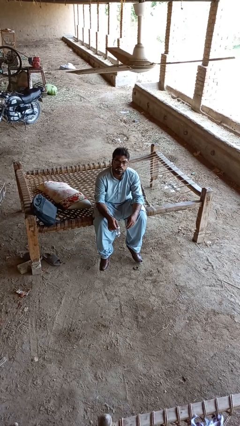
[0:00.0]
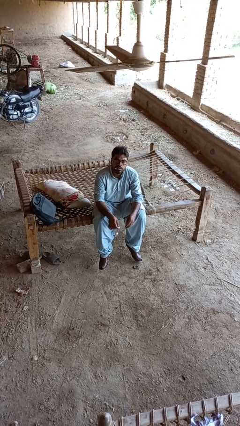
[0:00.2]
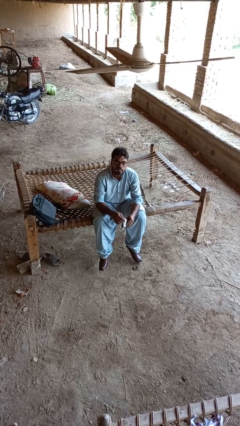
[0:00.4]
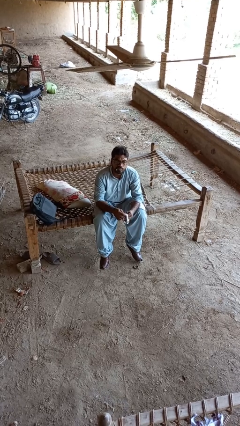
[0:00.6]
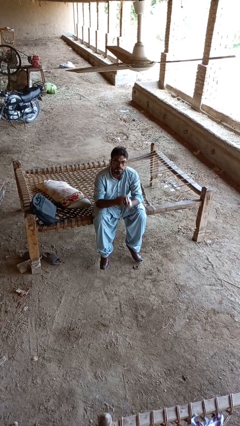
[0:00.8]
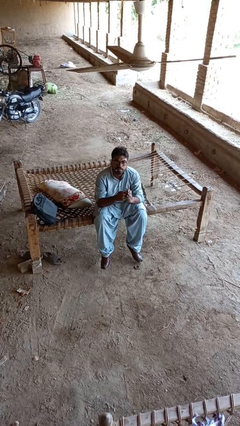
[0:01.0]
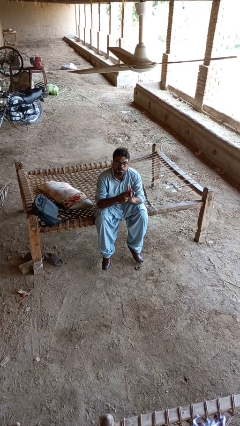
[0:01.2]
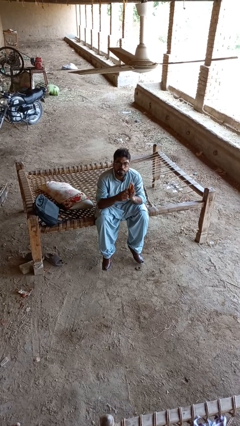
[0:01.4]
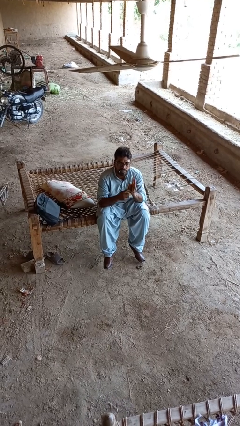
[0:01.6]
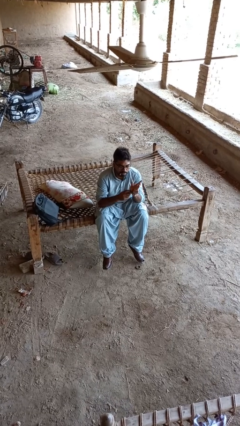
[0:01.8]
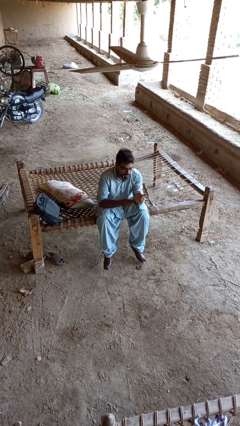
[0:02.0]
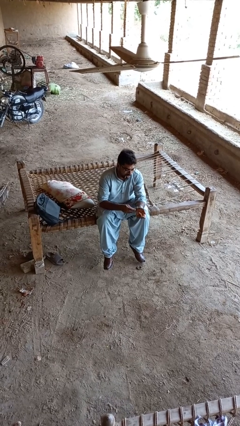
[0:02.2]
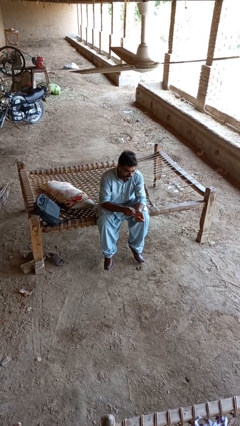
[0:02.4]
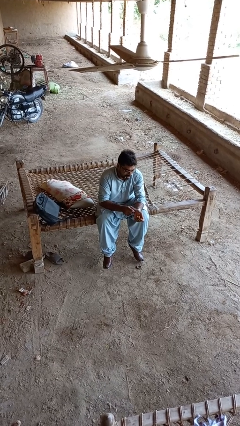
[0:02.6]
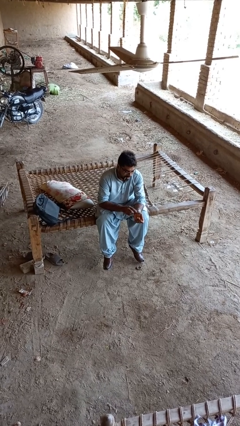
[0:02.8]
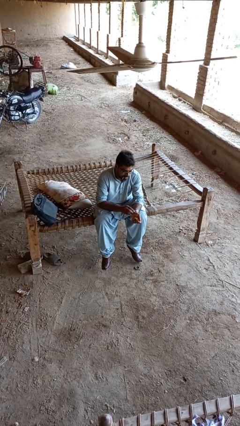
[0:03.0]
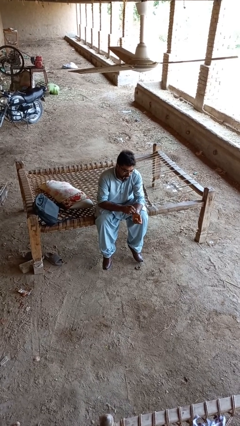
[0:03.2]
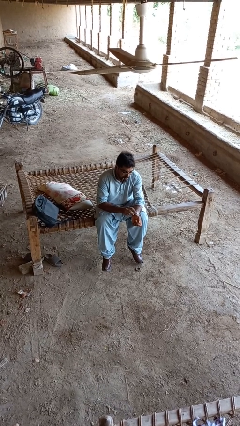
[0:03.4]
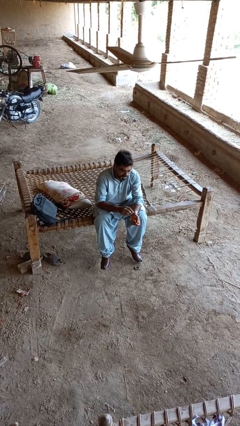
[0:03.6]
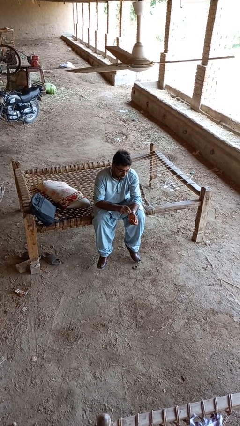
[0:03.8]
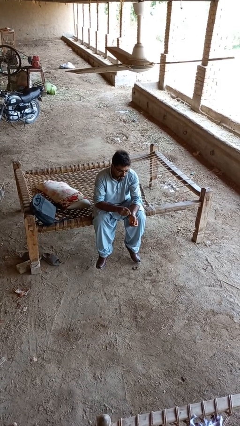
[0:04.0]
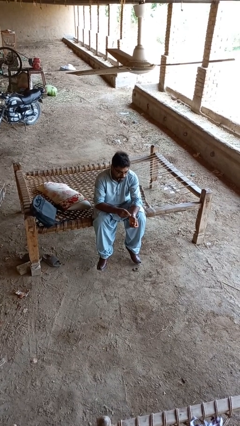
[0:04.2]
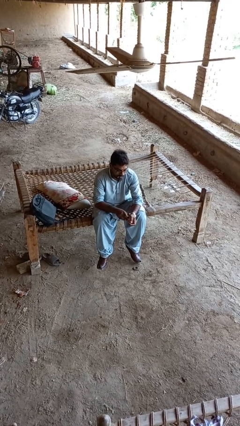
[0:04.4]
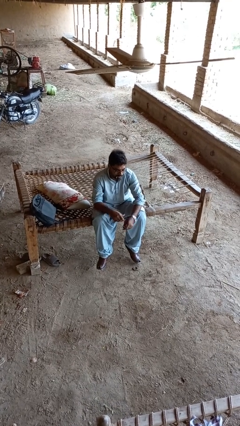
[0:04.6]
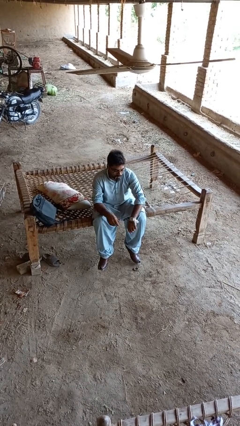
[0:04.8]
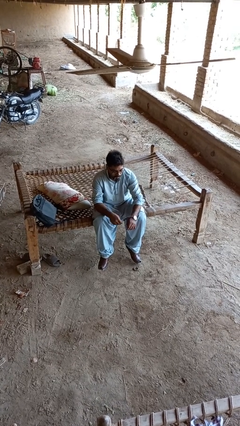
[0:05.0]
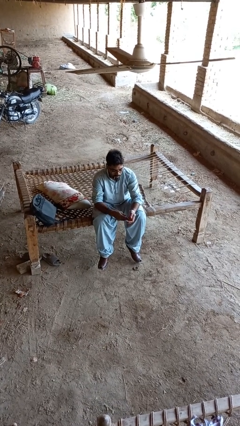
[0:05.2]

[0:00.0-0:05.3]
person puts on wristwatch

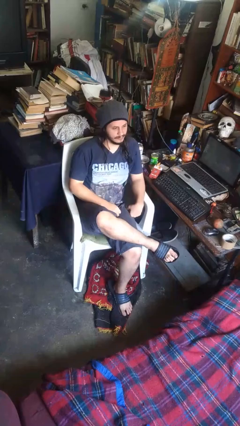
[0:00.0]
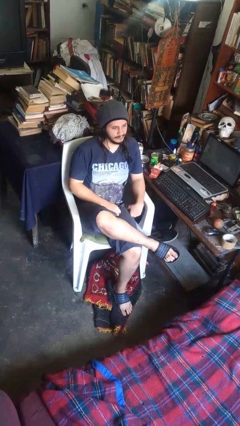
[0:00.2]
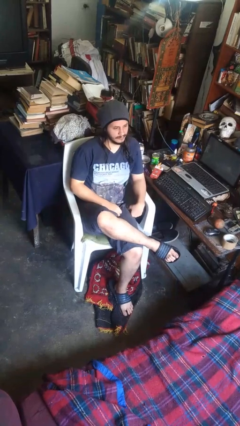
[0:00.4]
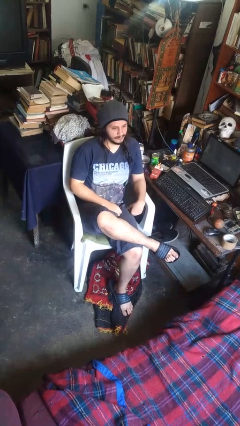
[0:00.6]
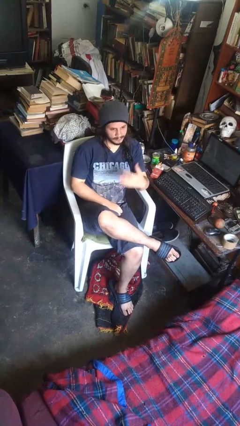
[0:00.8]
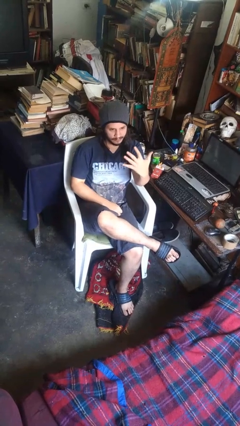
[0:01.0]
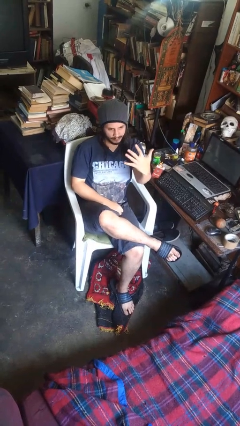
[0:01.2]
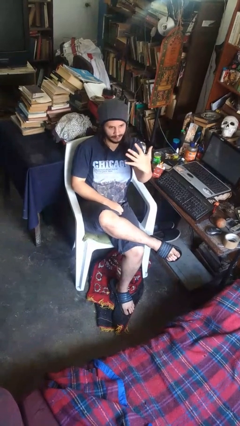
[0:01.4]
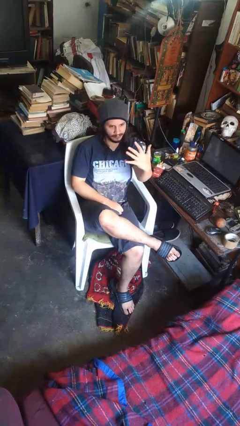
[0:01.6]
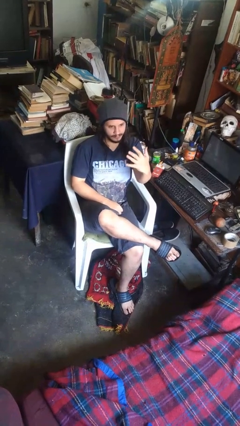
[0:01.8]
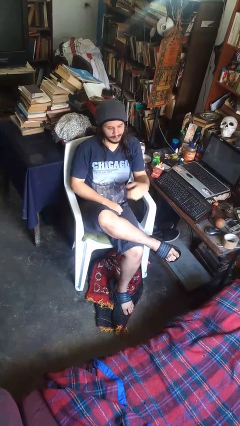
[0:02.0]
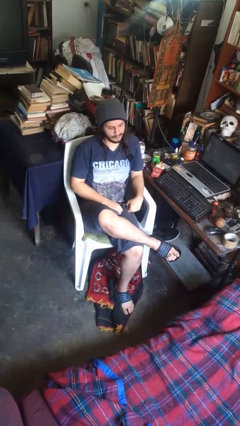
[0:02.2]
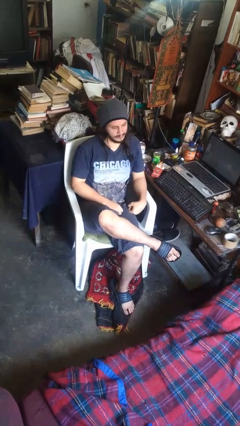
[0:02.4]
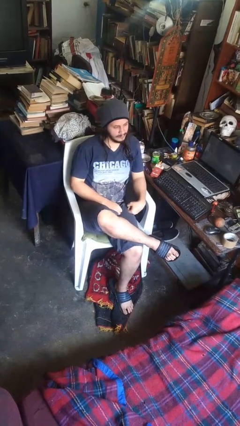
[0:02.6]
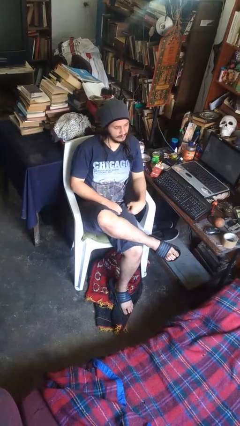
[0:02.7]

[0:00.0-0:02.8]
person gestures number five

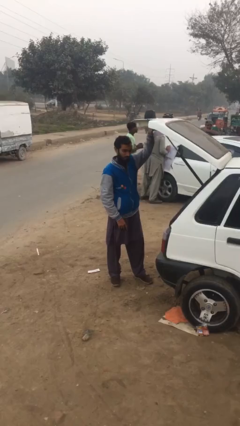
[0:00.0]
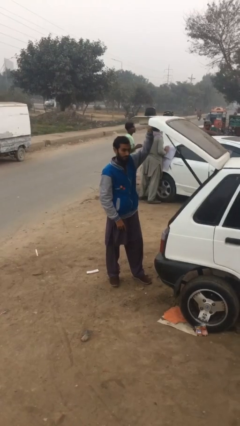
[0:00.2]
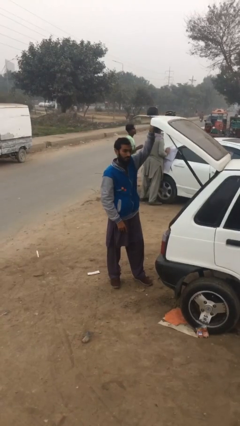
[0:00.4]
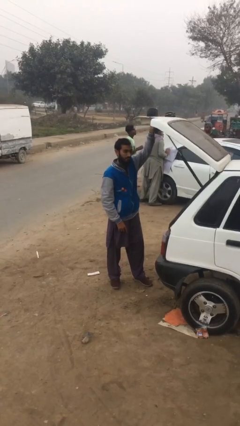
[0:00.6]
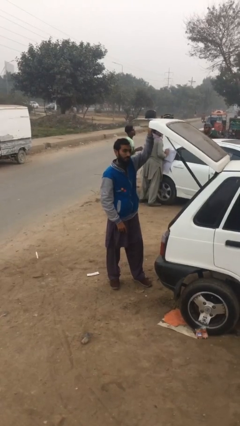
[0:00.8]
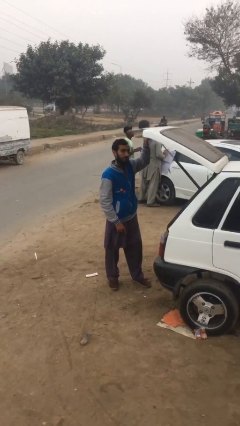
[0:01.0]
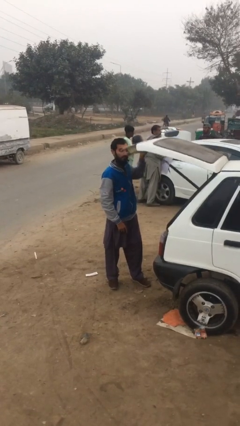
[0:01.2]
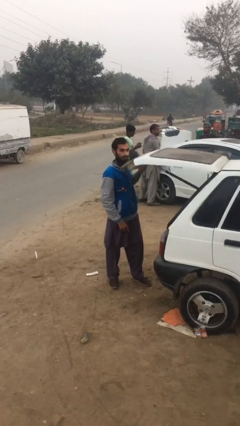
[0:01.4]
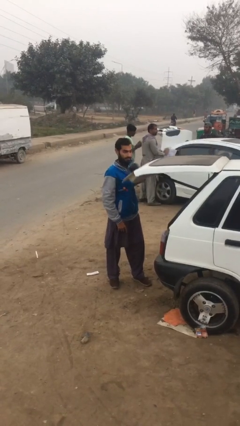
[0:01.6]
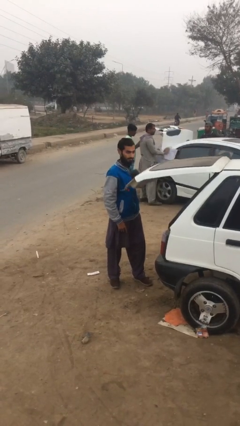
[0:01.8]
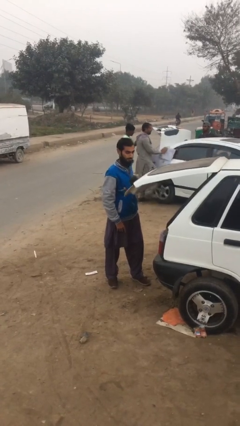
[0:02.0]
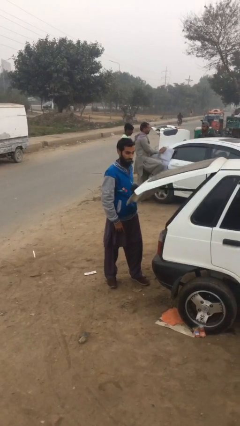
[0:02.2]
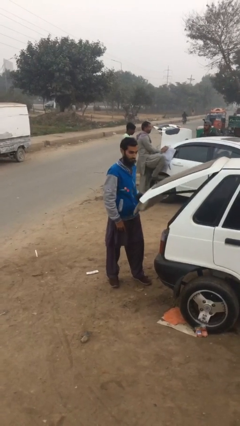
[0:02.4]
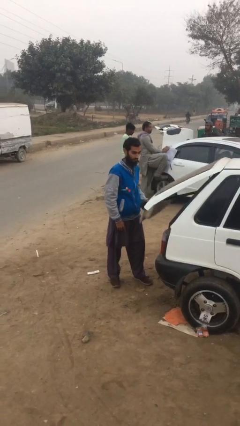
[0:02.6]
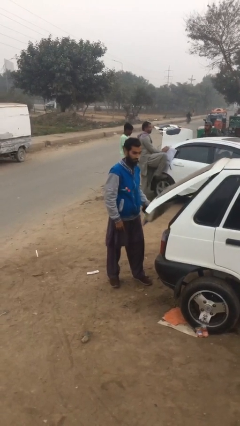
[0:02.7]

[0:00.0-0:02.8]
person closes car trunk

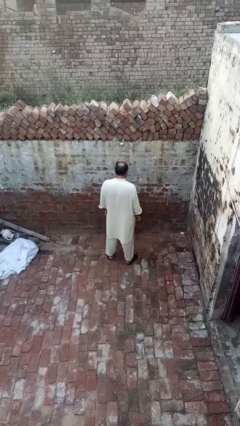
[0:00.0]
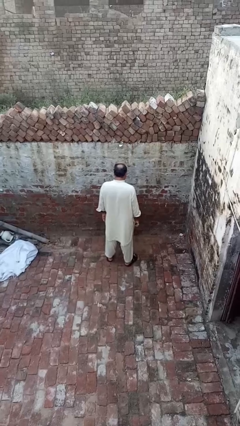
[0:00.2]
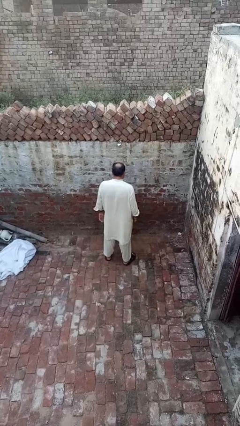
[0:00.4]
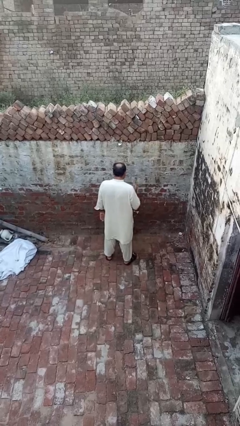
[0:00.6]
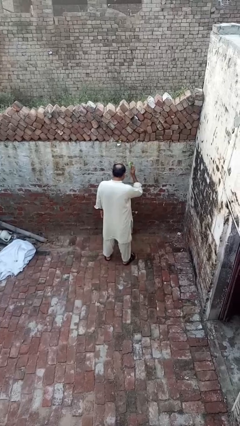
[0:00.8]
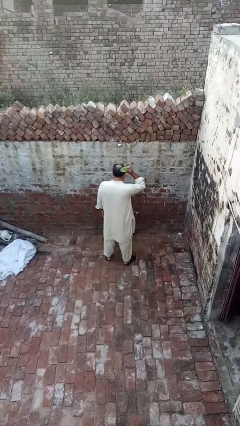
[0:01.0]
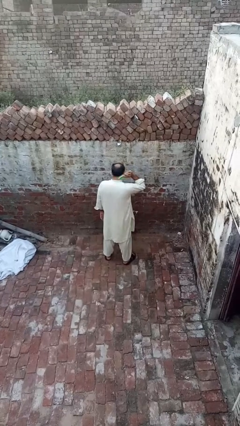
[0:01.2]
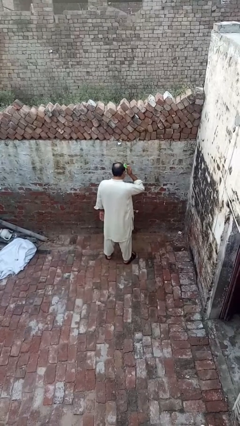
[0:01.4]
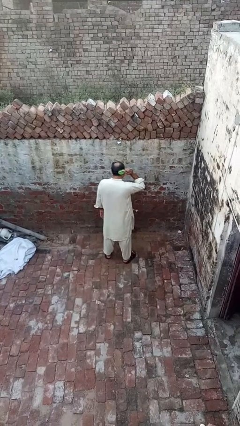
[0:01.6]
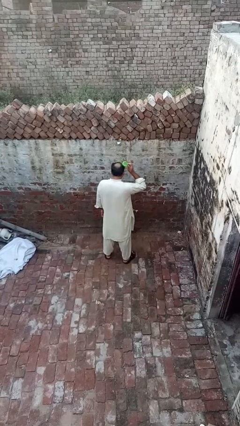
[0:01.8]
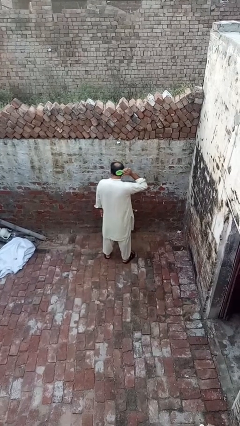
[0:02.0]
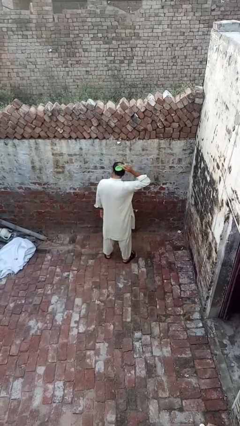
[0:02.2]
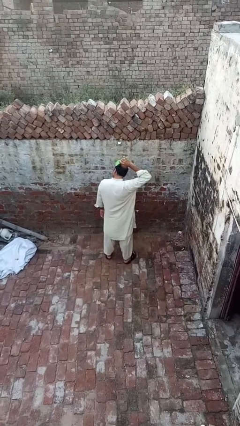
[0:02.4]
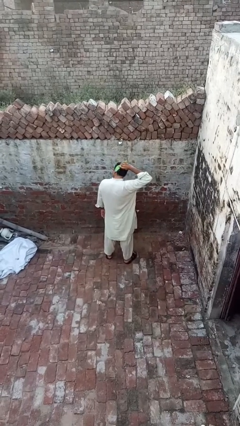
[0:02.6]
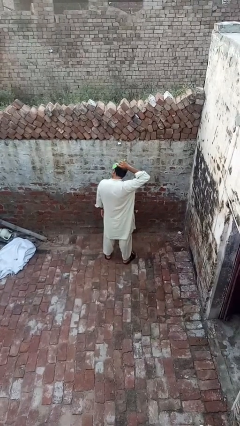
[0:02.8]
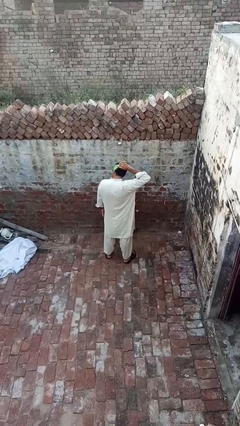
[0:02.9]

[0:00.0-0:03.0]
person brushes hair

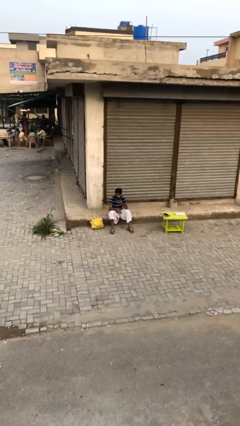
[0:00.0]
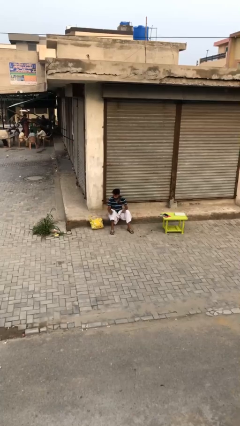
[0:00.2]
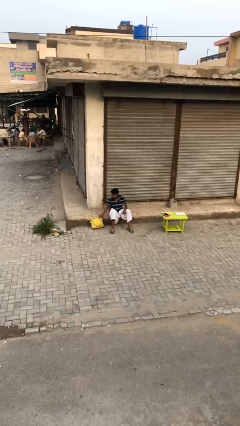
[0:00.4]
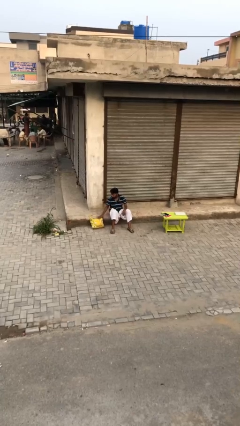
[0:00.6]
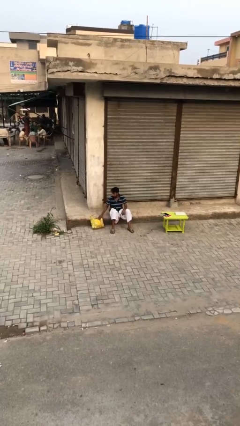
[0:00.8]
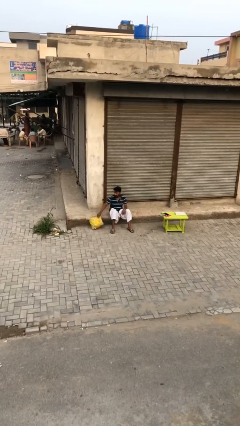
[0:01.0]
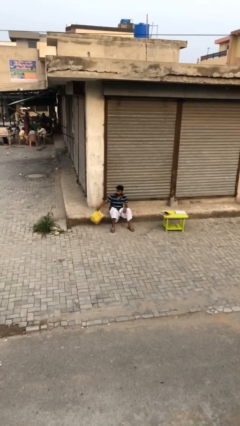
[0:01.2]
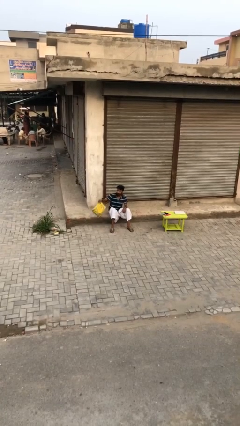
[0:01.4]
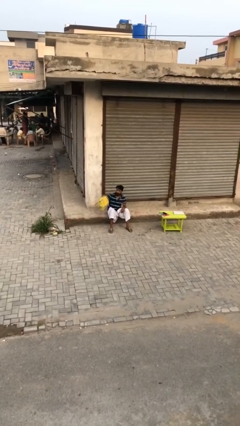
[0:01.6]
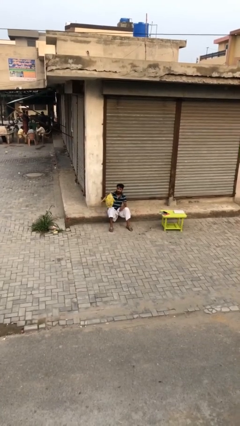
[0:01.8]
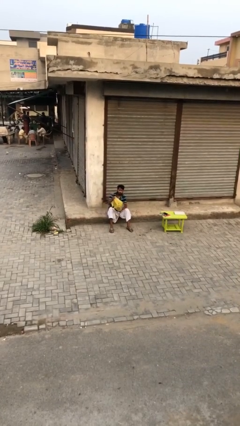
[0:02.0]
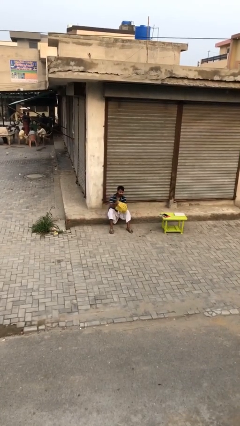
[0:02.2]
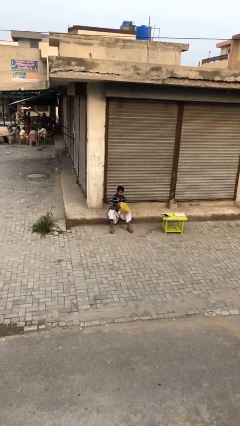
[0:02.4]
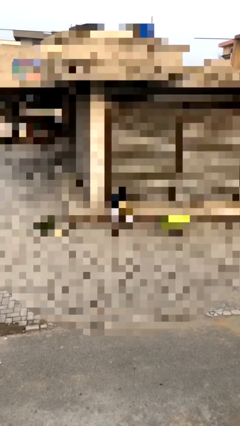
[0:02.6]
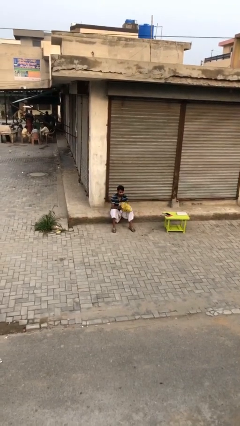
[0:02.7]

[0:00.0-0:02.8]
person picks up object from floor

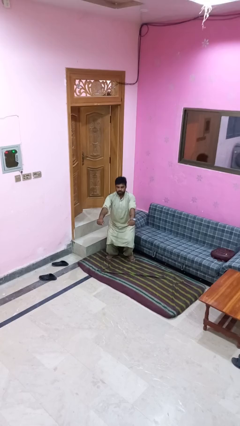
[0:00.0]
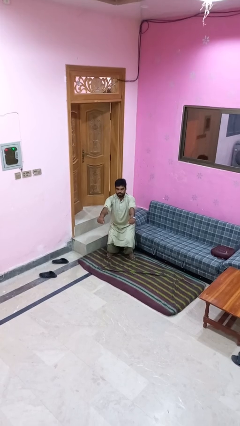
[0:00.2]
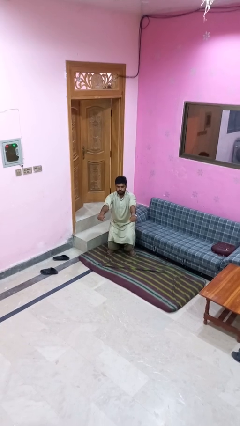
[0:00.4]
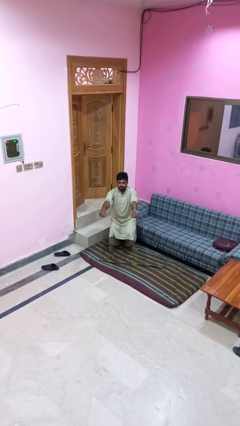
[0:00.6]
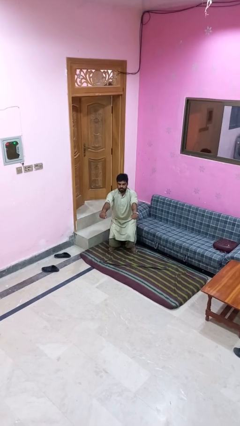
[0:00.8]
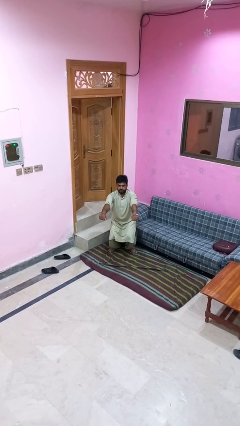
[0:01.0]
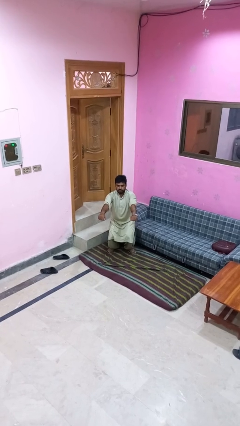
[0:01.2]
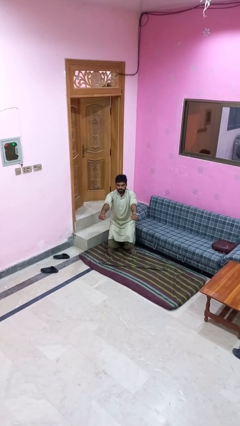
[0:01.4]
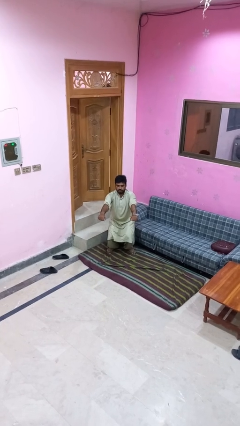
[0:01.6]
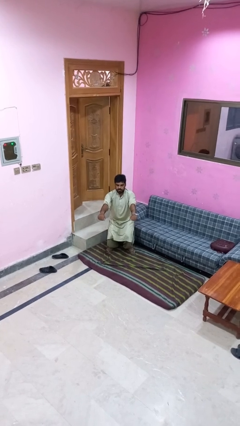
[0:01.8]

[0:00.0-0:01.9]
person squats
